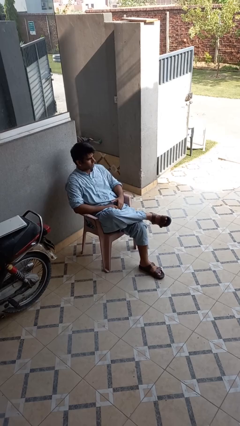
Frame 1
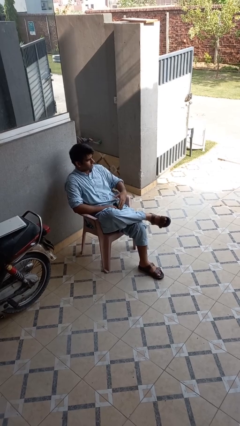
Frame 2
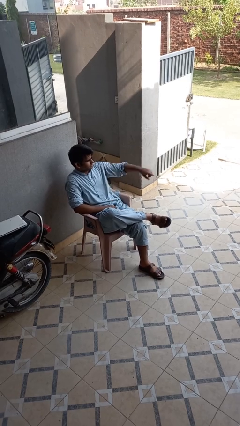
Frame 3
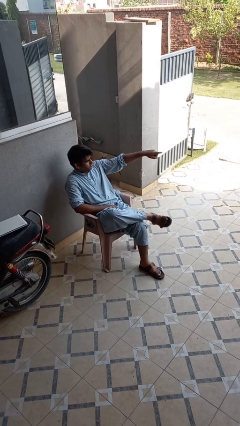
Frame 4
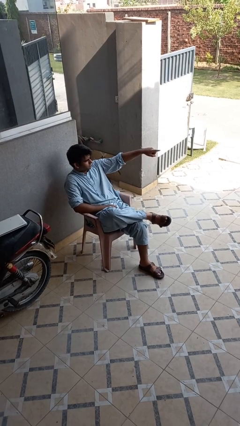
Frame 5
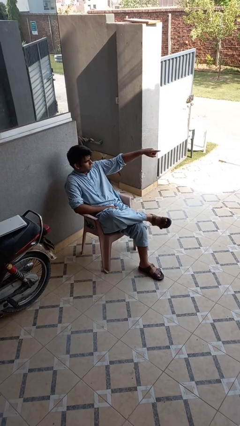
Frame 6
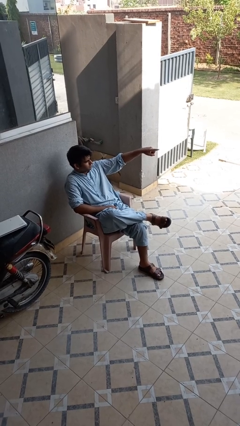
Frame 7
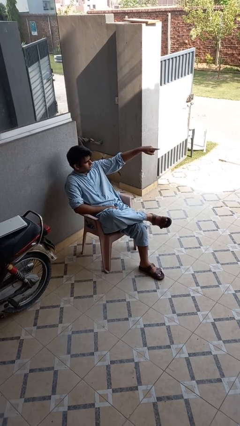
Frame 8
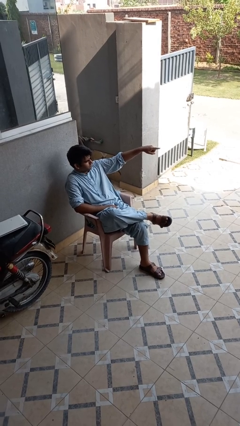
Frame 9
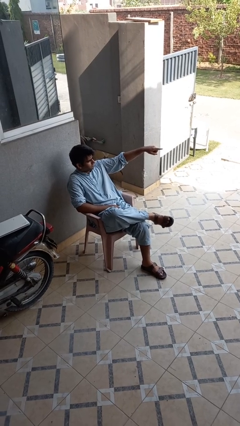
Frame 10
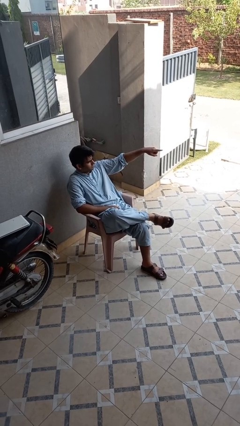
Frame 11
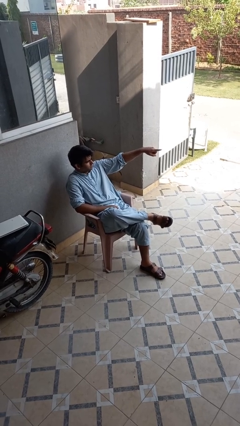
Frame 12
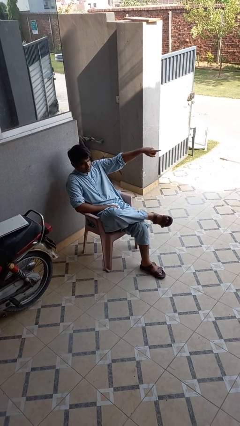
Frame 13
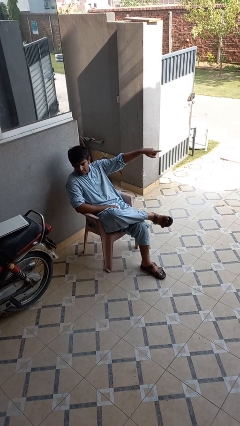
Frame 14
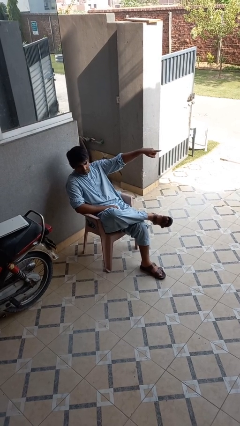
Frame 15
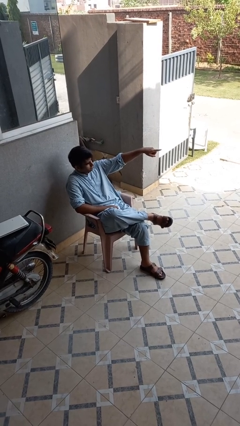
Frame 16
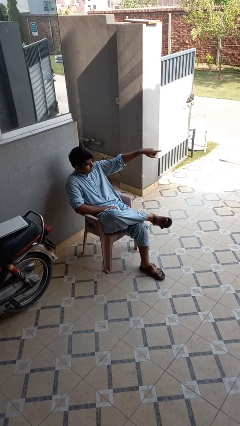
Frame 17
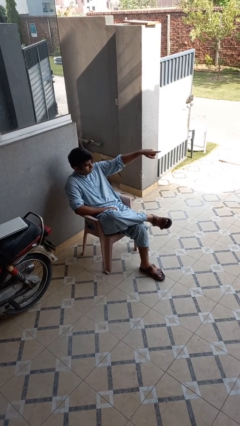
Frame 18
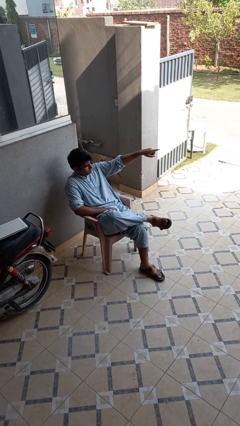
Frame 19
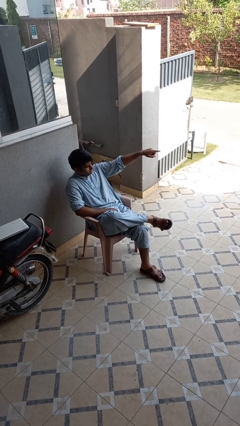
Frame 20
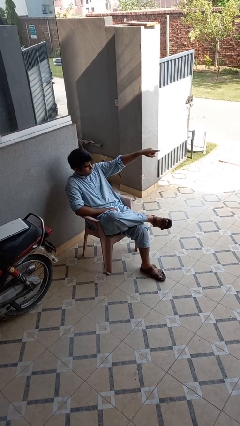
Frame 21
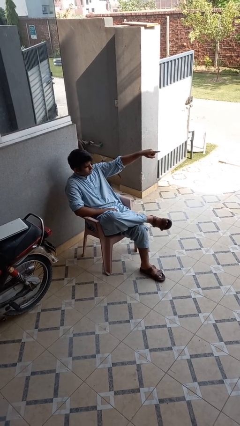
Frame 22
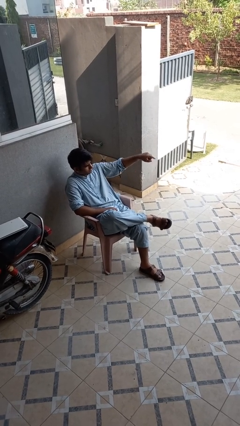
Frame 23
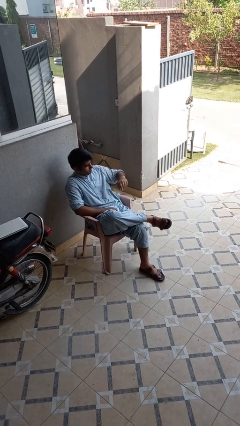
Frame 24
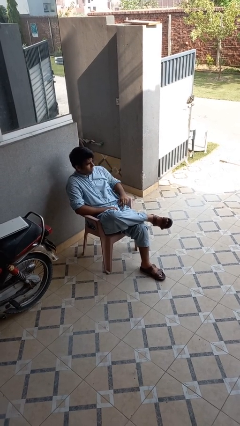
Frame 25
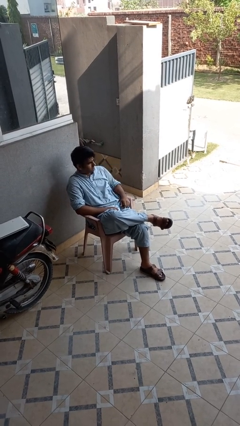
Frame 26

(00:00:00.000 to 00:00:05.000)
person points at person

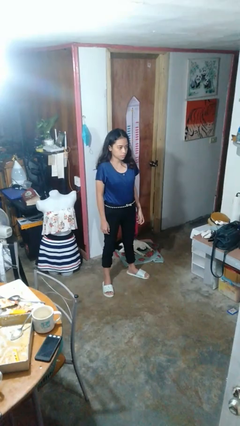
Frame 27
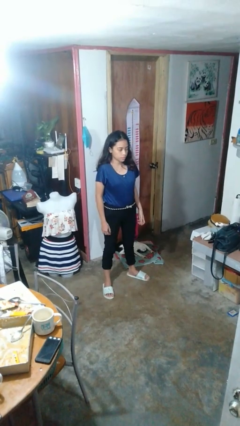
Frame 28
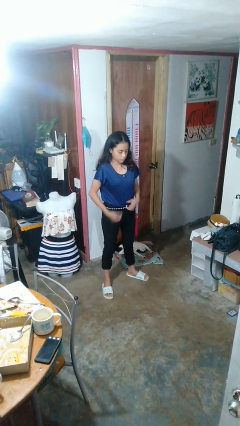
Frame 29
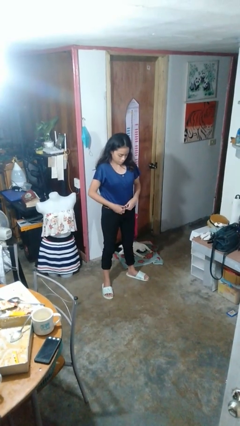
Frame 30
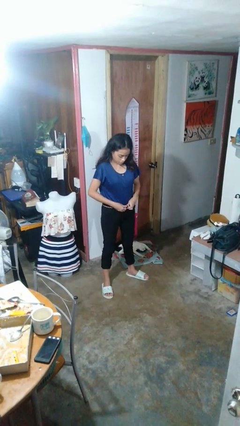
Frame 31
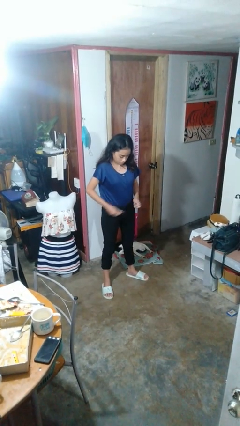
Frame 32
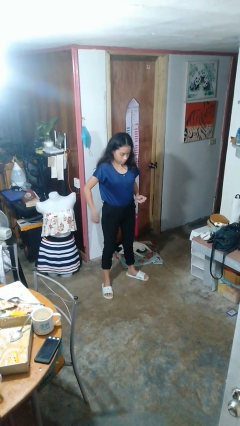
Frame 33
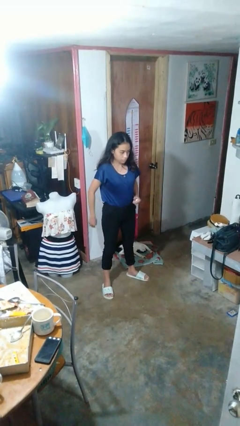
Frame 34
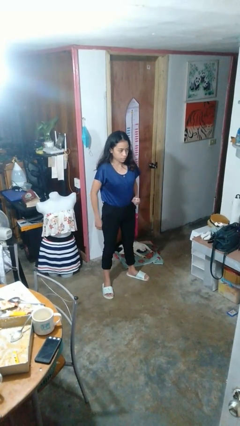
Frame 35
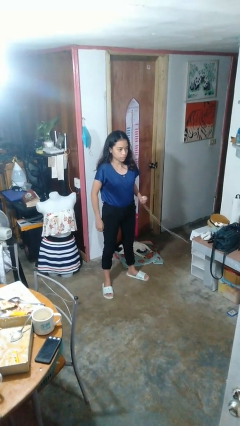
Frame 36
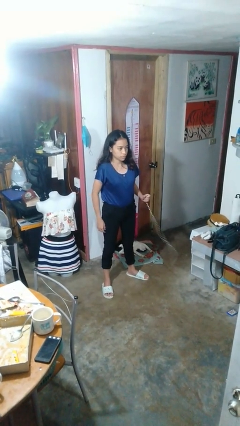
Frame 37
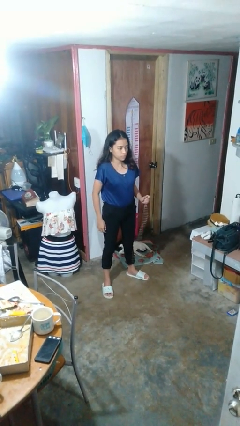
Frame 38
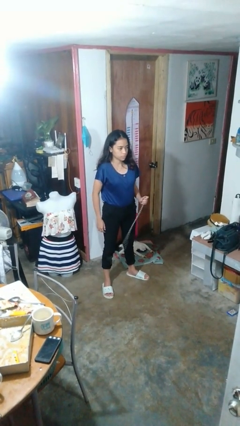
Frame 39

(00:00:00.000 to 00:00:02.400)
person takes off belt

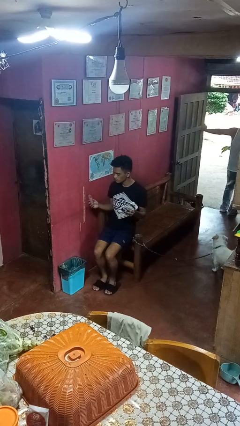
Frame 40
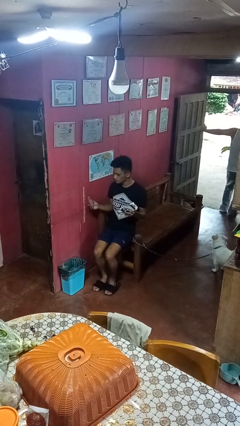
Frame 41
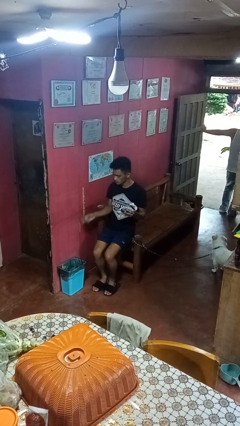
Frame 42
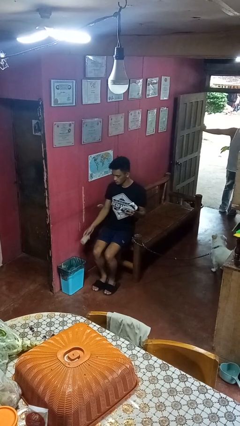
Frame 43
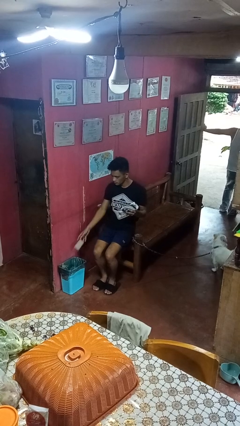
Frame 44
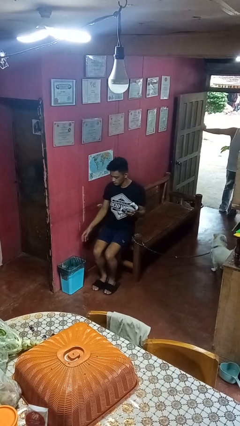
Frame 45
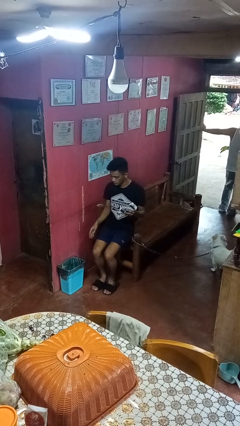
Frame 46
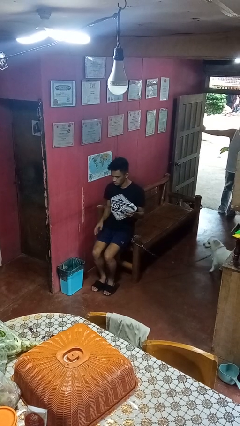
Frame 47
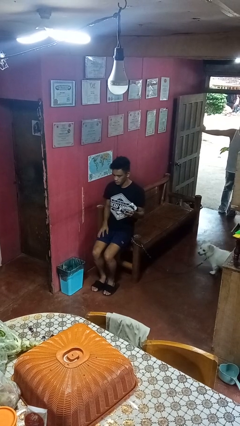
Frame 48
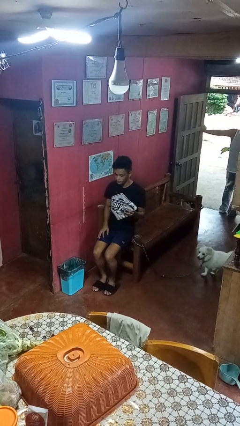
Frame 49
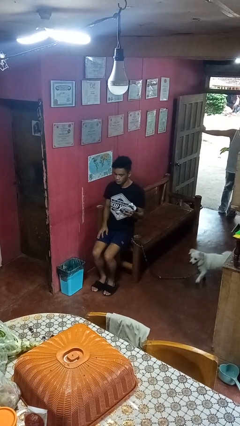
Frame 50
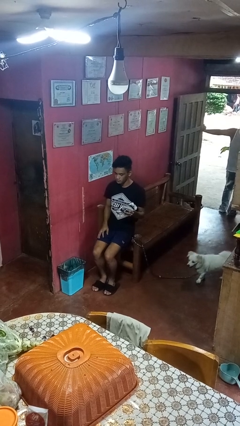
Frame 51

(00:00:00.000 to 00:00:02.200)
person discards trash

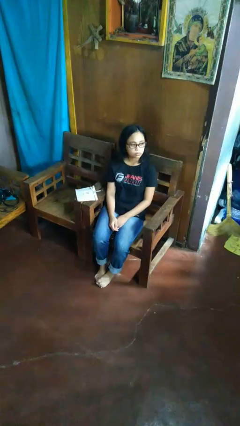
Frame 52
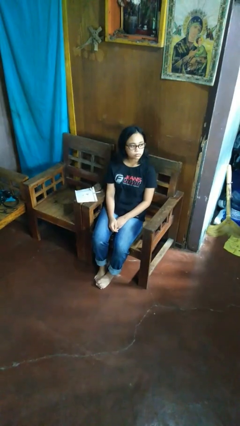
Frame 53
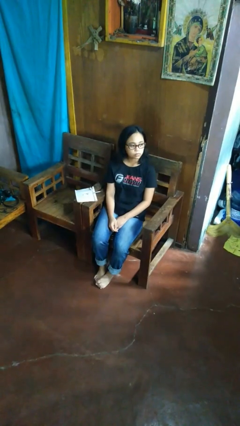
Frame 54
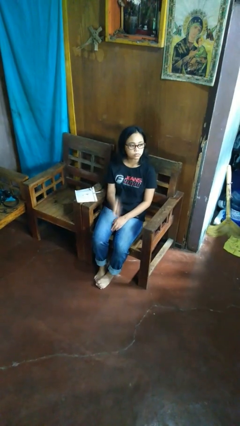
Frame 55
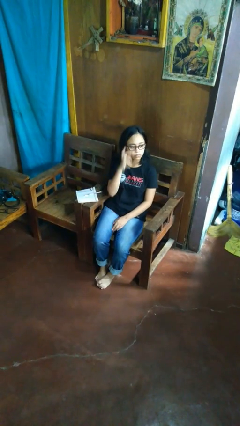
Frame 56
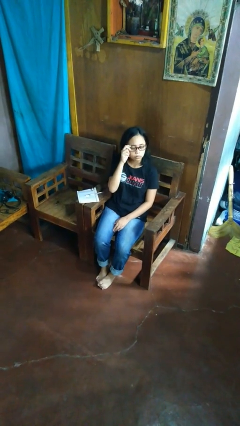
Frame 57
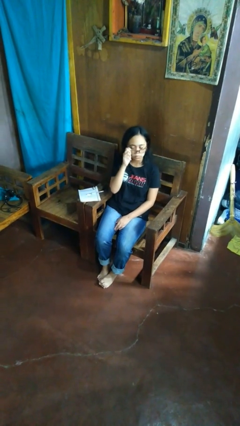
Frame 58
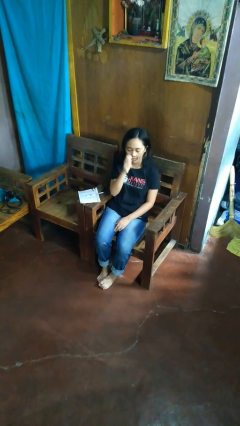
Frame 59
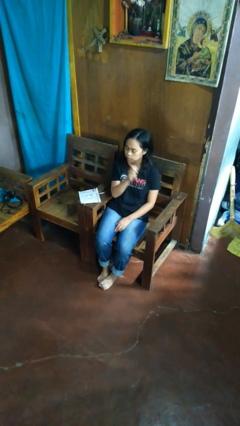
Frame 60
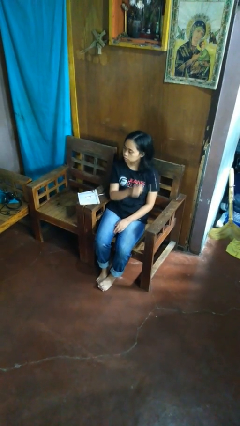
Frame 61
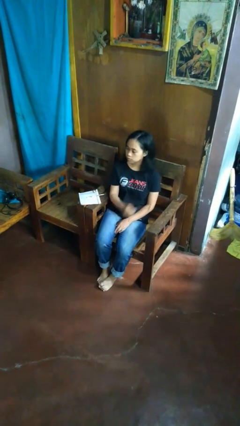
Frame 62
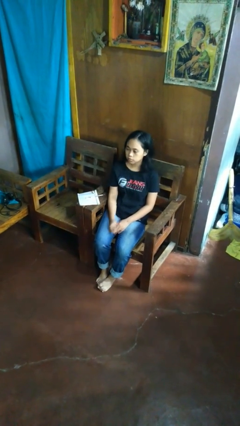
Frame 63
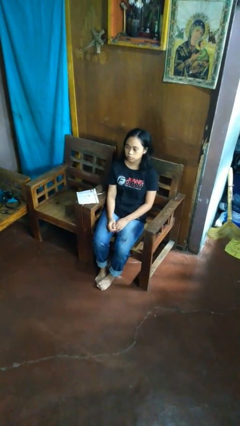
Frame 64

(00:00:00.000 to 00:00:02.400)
person takes off glasses

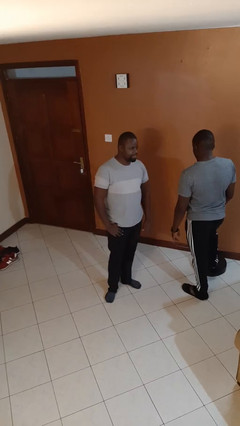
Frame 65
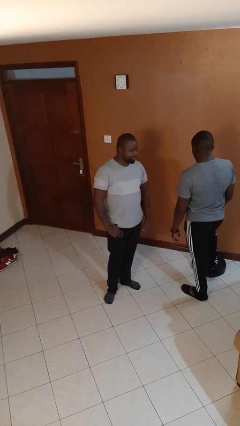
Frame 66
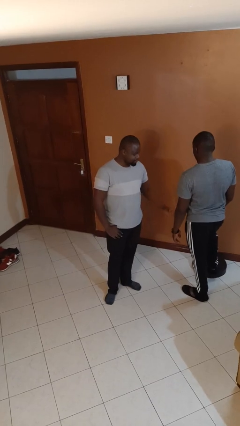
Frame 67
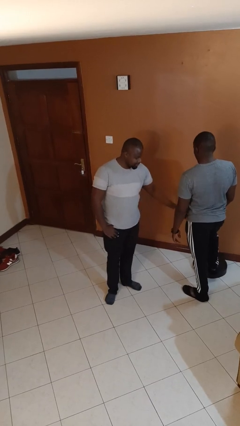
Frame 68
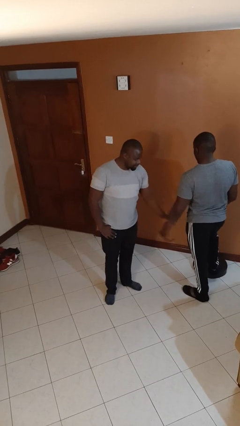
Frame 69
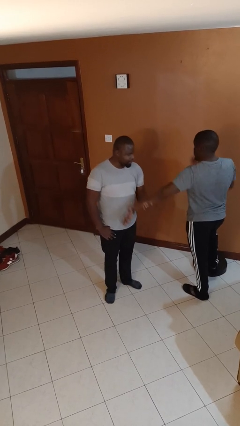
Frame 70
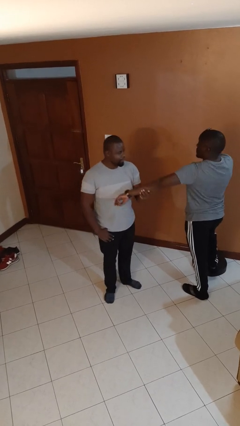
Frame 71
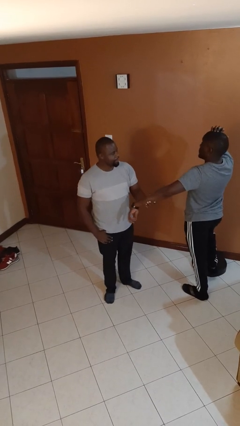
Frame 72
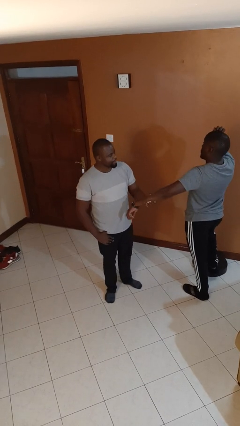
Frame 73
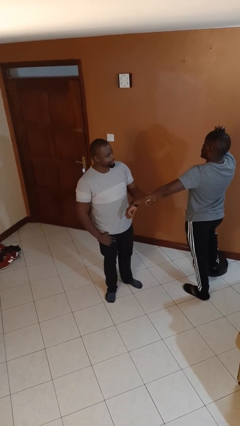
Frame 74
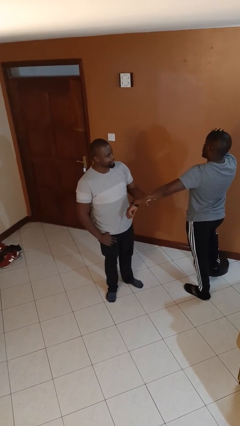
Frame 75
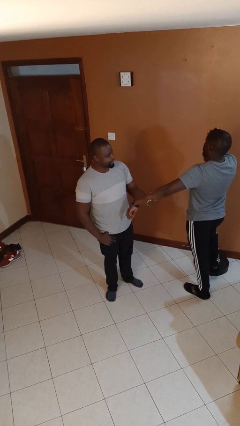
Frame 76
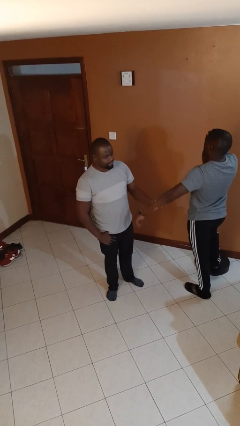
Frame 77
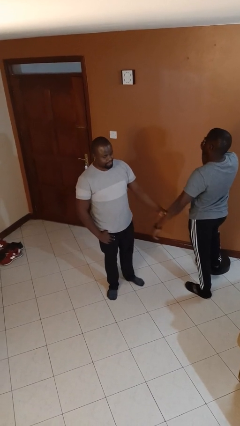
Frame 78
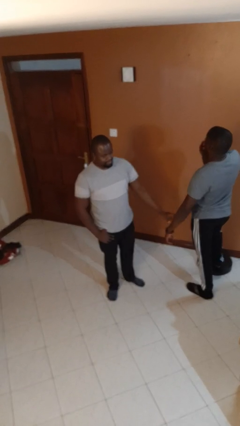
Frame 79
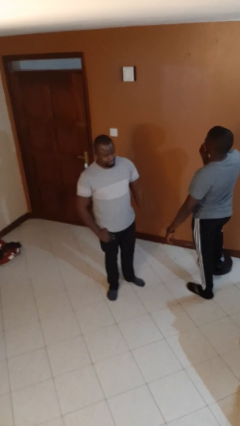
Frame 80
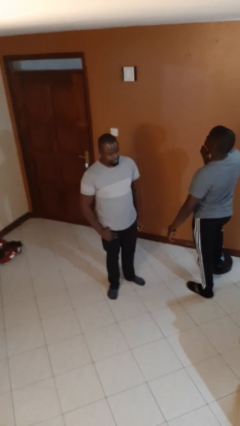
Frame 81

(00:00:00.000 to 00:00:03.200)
person grabs person by forearm

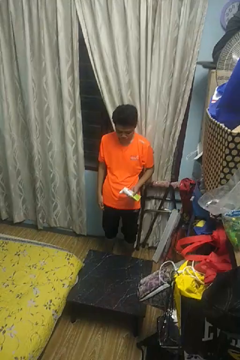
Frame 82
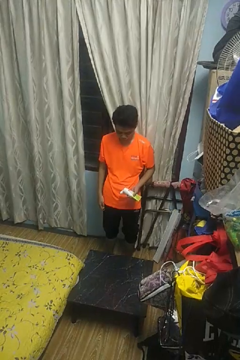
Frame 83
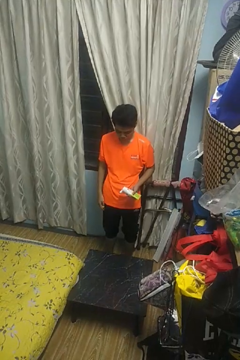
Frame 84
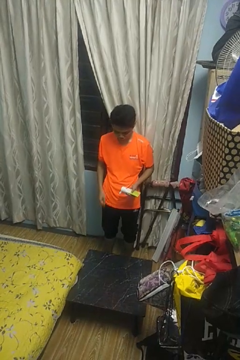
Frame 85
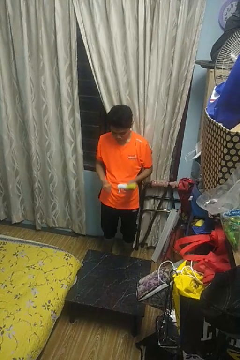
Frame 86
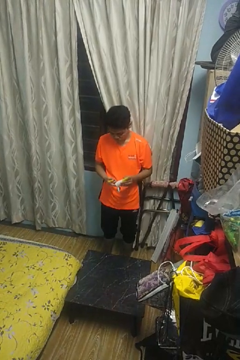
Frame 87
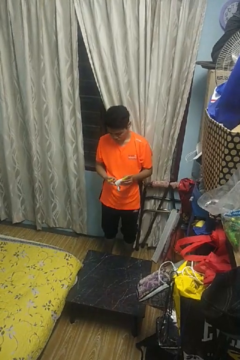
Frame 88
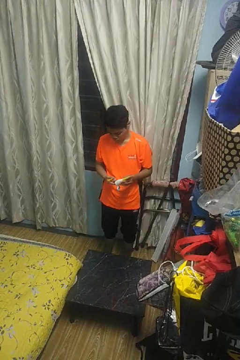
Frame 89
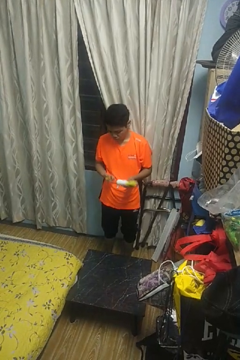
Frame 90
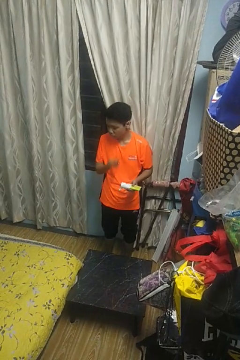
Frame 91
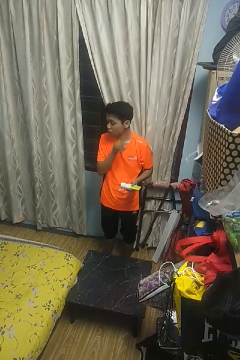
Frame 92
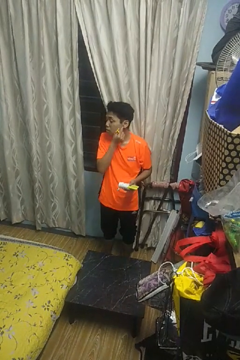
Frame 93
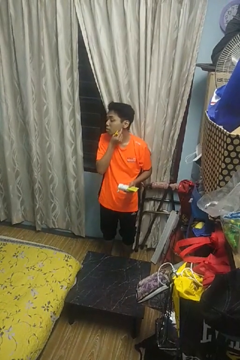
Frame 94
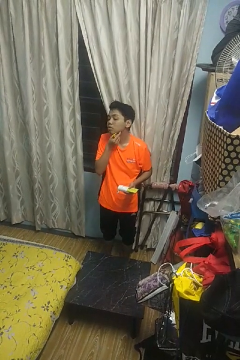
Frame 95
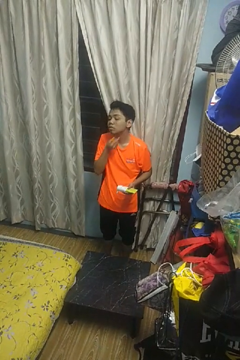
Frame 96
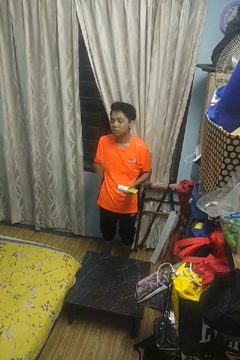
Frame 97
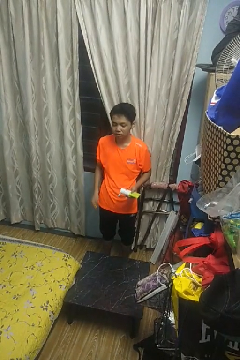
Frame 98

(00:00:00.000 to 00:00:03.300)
person applies shaving cream
